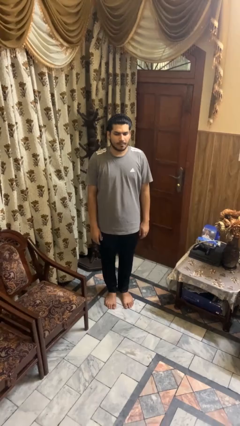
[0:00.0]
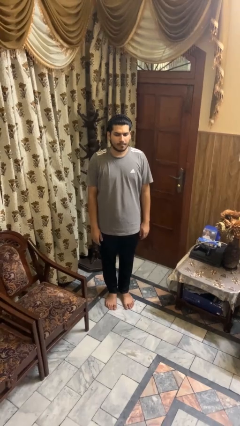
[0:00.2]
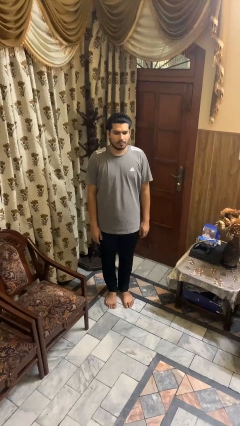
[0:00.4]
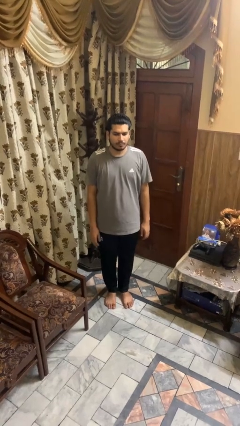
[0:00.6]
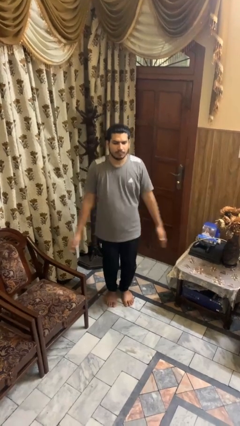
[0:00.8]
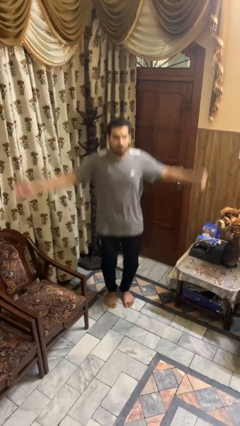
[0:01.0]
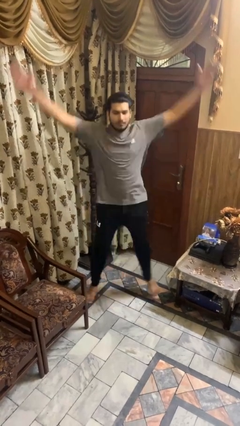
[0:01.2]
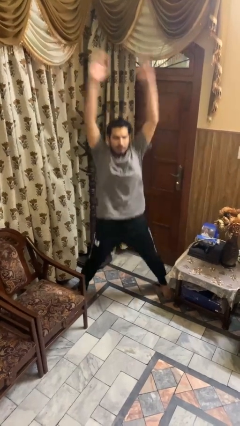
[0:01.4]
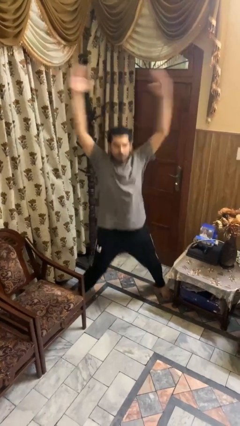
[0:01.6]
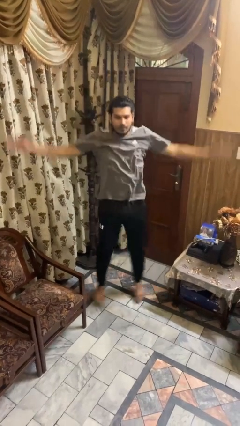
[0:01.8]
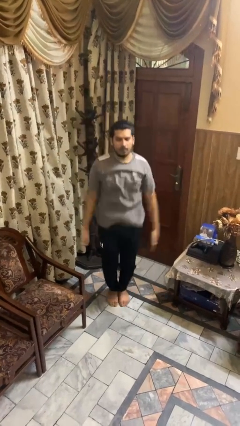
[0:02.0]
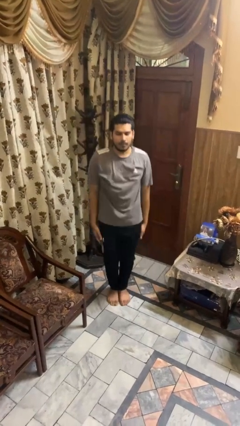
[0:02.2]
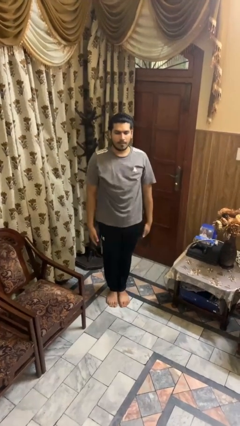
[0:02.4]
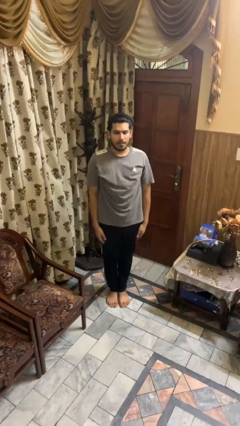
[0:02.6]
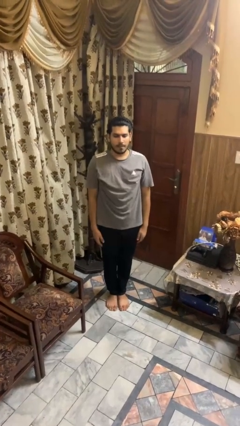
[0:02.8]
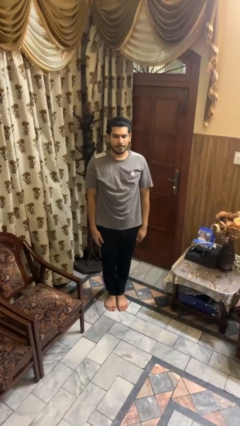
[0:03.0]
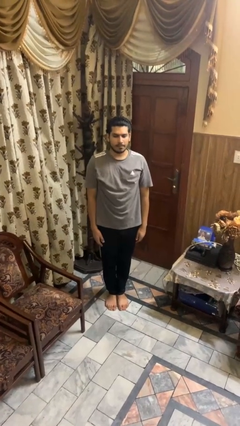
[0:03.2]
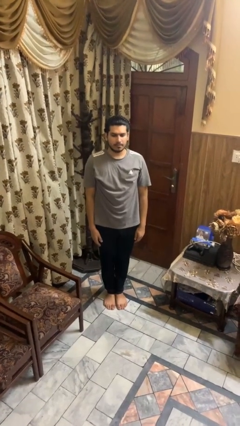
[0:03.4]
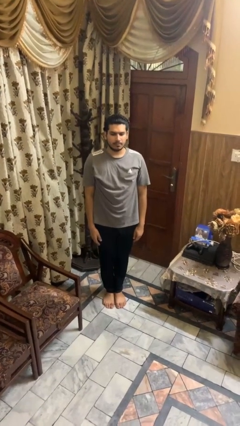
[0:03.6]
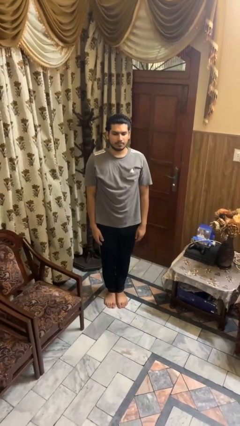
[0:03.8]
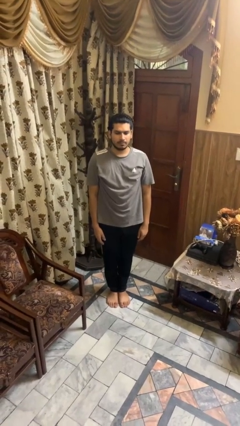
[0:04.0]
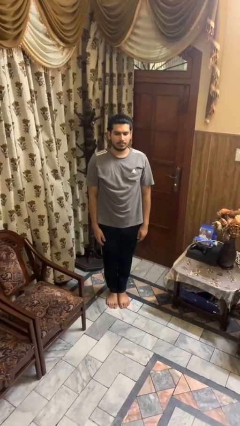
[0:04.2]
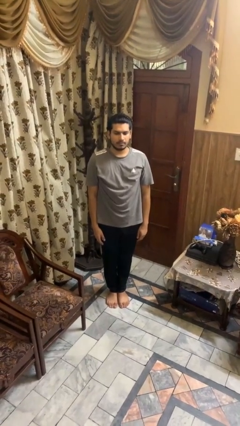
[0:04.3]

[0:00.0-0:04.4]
person exercises with jumping jacks

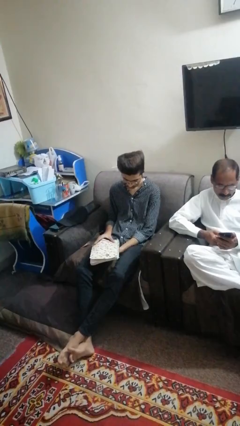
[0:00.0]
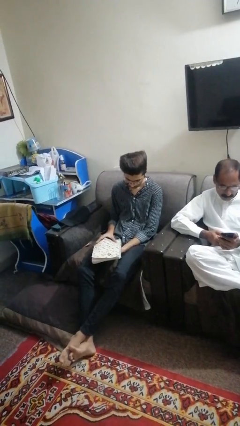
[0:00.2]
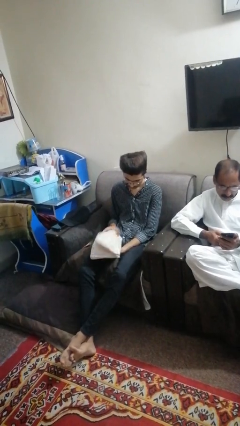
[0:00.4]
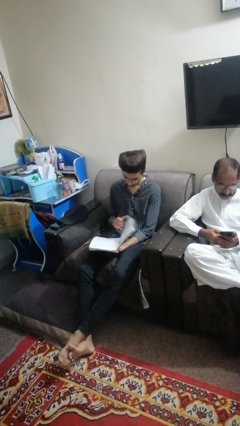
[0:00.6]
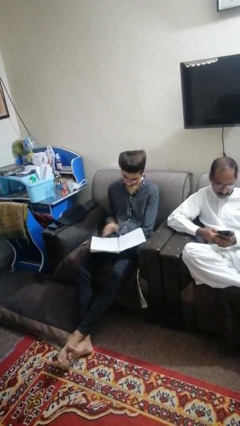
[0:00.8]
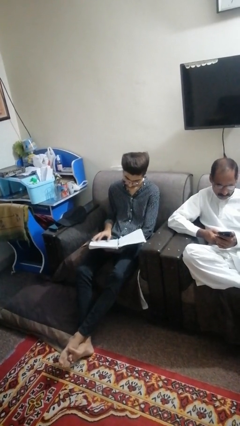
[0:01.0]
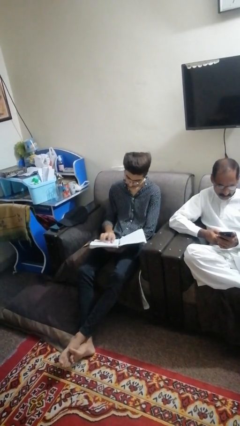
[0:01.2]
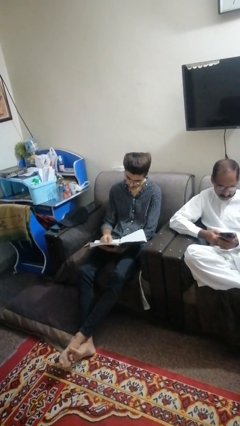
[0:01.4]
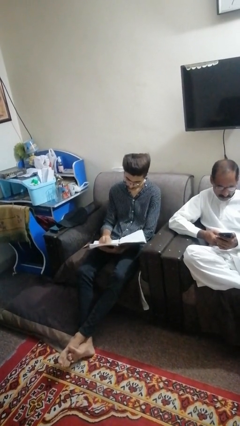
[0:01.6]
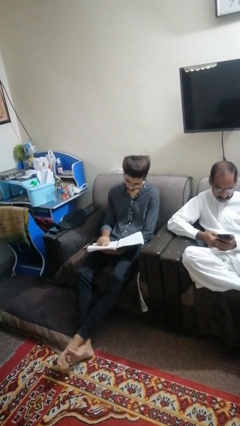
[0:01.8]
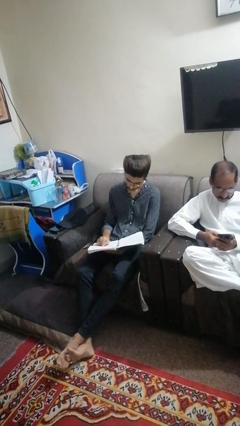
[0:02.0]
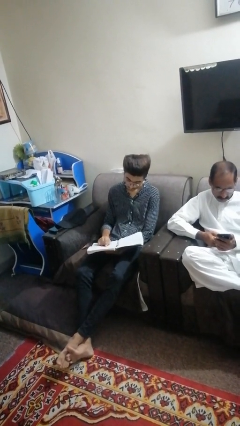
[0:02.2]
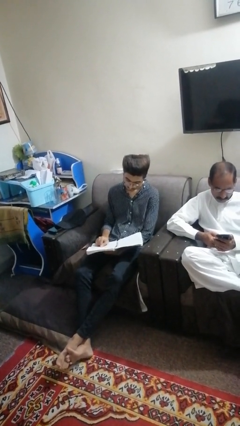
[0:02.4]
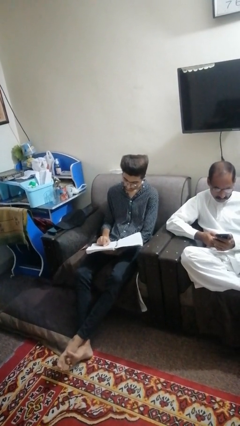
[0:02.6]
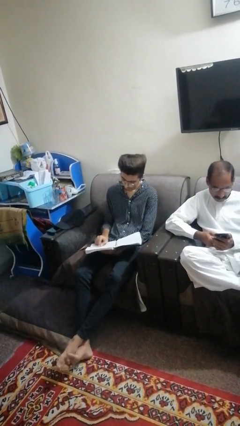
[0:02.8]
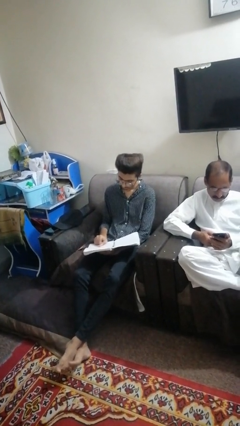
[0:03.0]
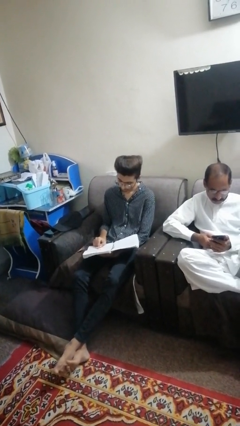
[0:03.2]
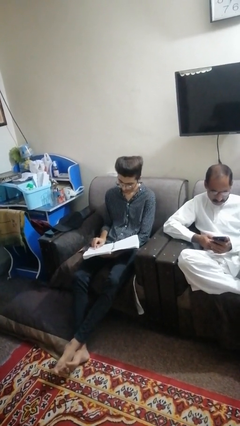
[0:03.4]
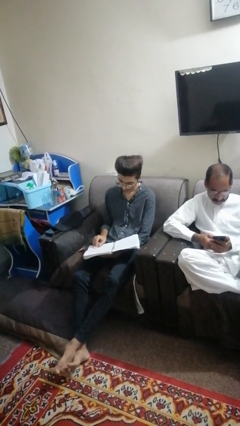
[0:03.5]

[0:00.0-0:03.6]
person reads magazine

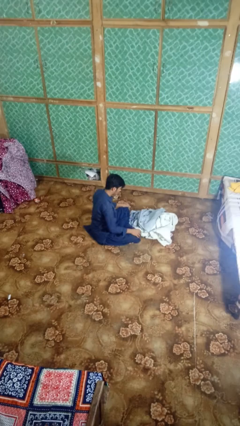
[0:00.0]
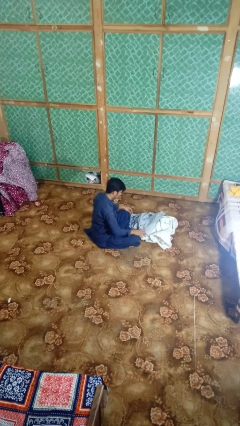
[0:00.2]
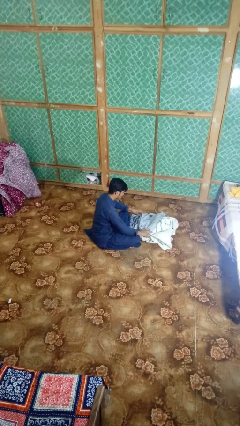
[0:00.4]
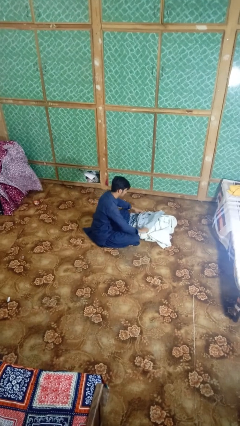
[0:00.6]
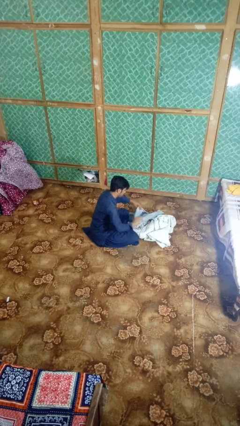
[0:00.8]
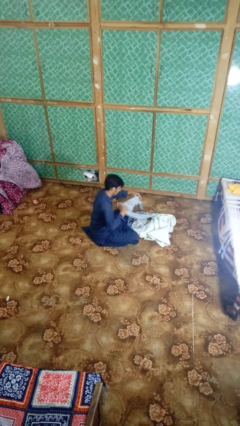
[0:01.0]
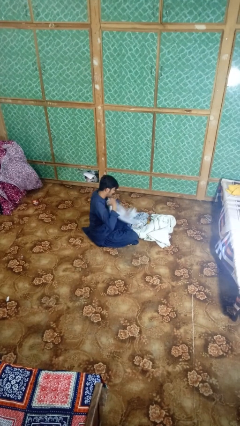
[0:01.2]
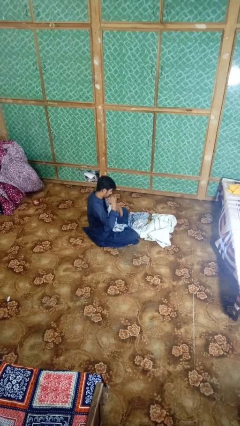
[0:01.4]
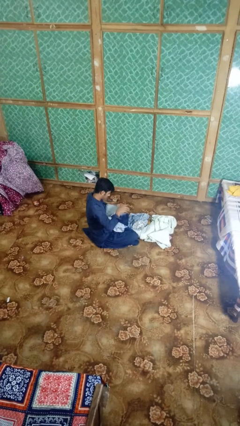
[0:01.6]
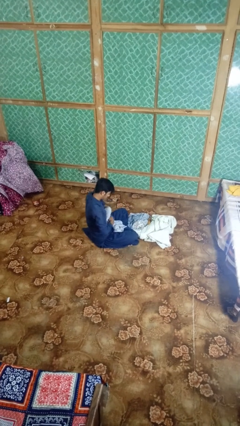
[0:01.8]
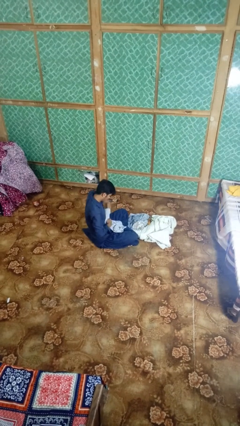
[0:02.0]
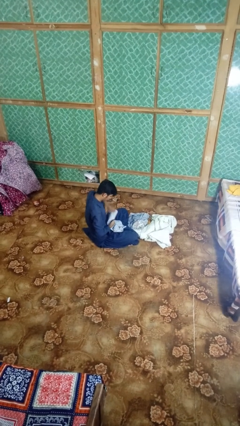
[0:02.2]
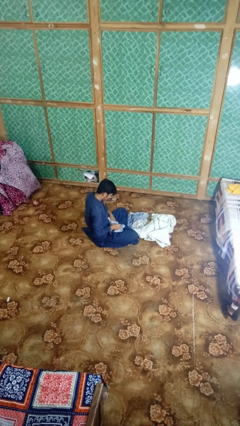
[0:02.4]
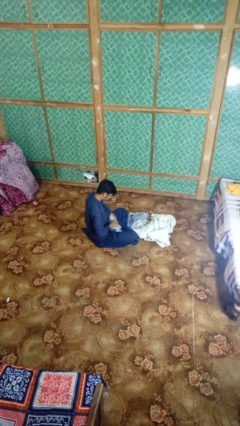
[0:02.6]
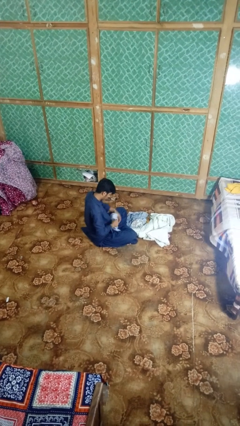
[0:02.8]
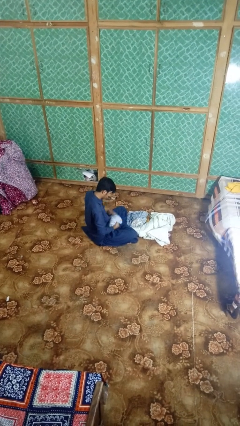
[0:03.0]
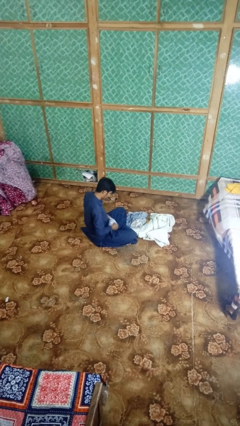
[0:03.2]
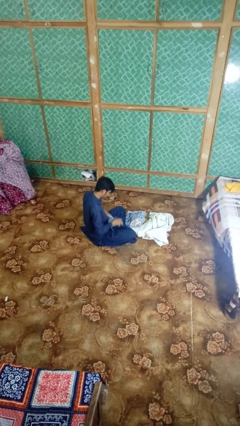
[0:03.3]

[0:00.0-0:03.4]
person folds shirt

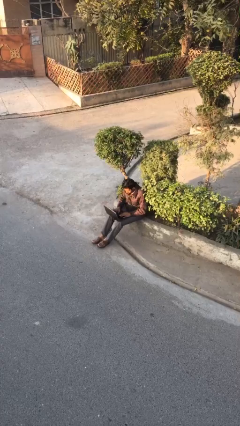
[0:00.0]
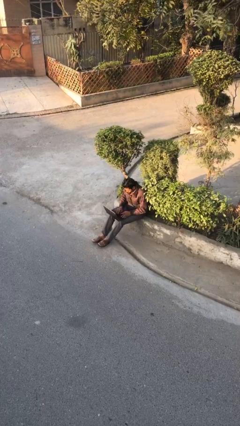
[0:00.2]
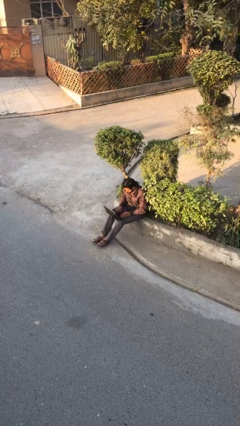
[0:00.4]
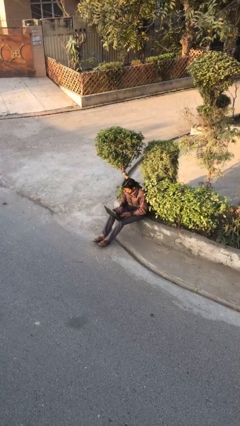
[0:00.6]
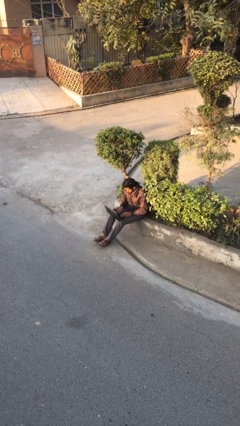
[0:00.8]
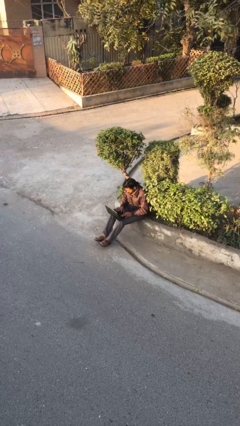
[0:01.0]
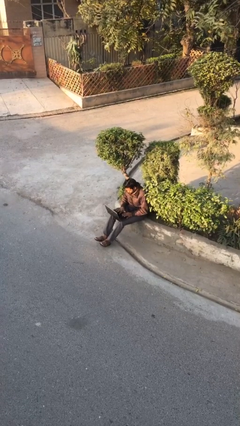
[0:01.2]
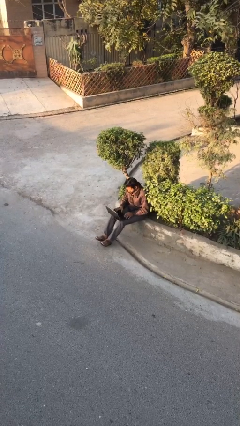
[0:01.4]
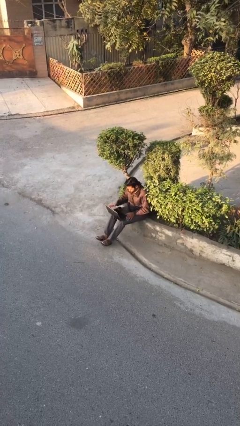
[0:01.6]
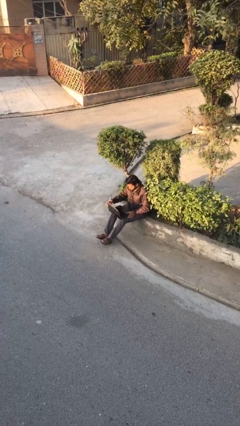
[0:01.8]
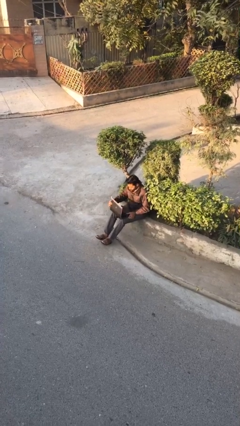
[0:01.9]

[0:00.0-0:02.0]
person interacts with laptop

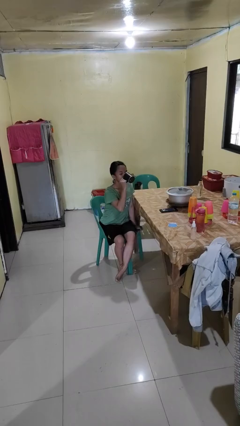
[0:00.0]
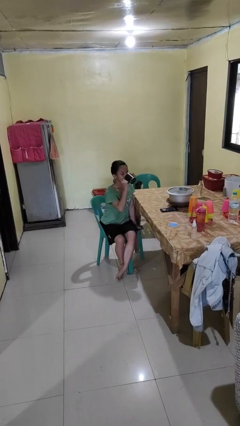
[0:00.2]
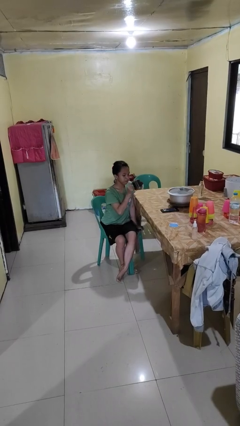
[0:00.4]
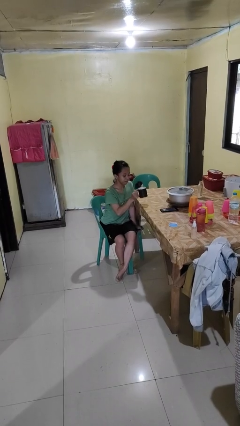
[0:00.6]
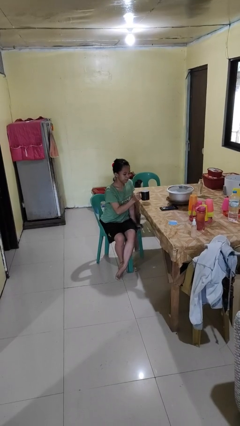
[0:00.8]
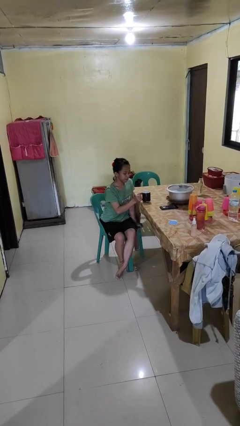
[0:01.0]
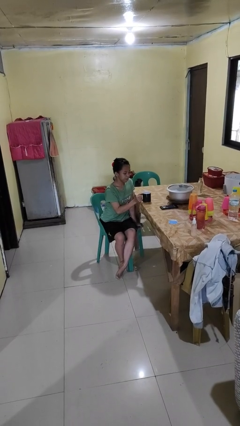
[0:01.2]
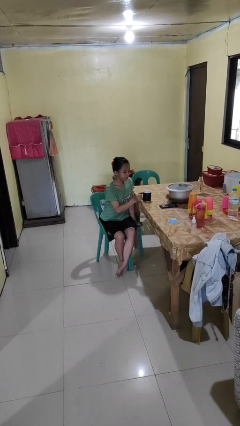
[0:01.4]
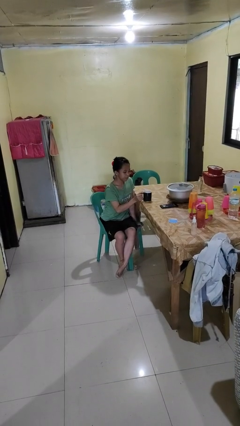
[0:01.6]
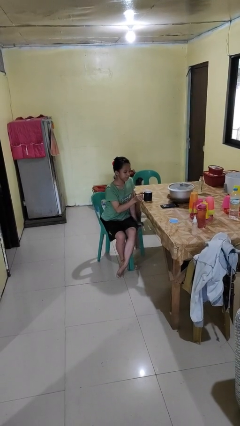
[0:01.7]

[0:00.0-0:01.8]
person puts down object on table

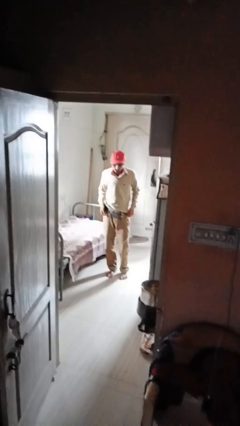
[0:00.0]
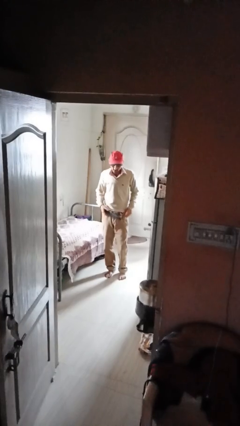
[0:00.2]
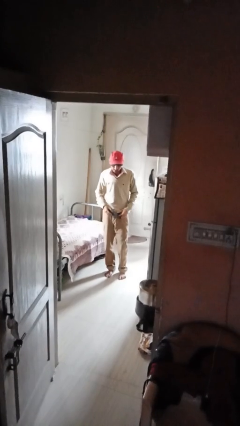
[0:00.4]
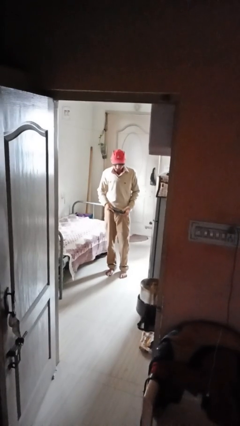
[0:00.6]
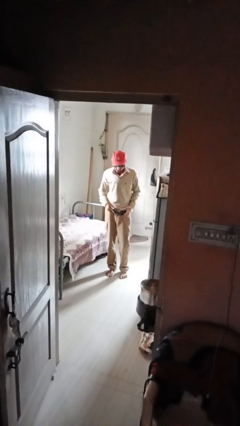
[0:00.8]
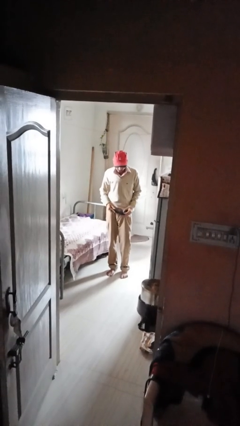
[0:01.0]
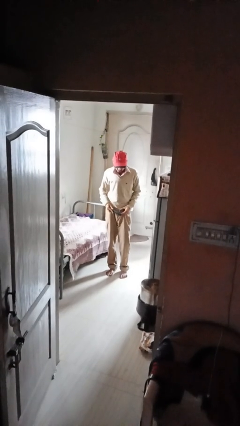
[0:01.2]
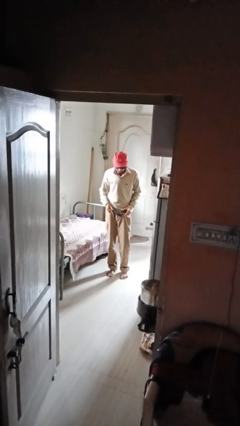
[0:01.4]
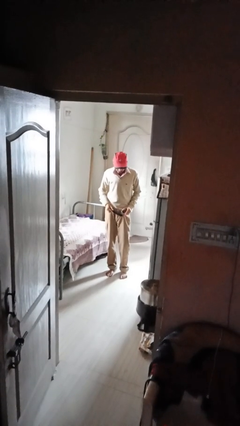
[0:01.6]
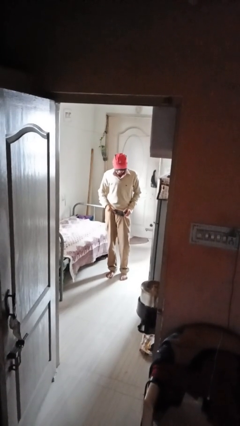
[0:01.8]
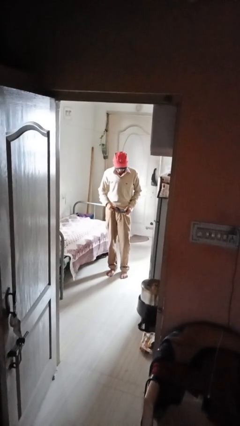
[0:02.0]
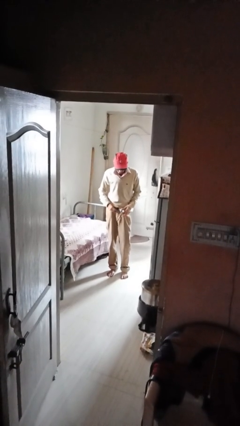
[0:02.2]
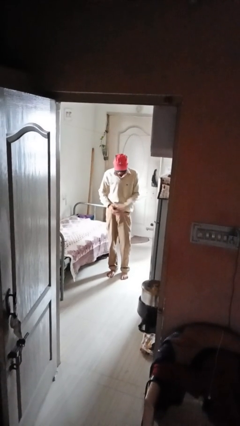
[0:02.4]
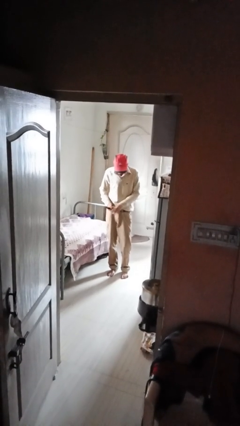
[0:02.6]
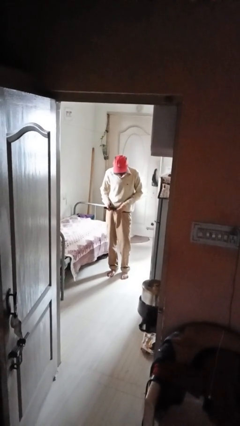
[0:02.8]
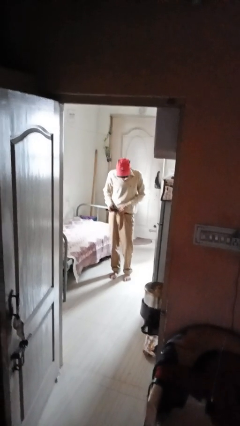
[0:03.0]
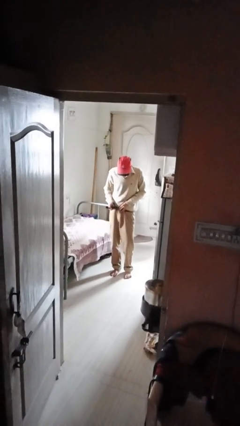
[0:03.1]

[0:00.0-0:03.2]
person puts on belt
